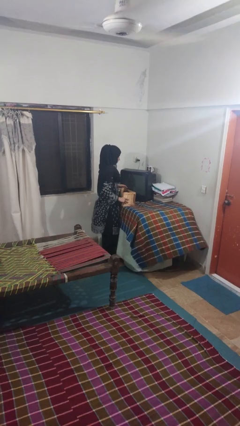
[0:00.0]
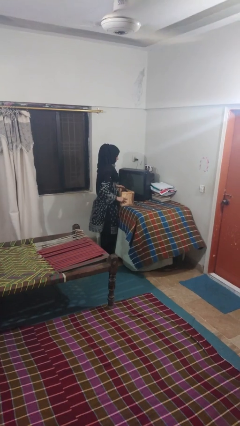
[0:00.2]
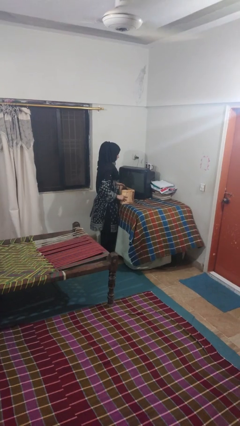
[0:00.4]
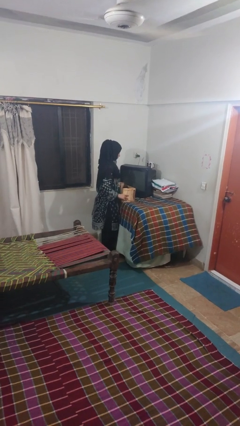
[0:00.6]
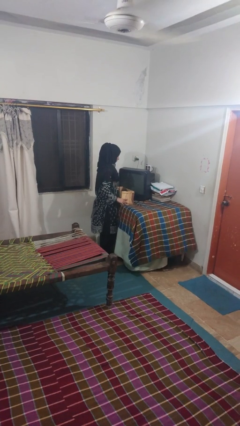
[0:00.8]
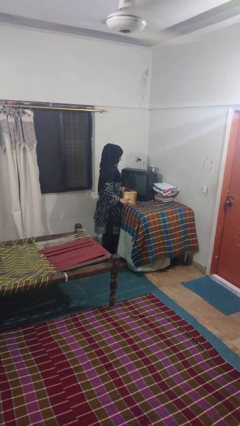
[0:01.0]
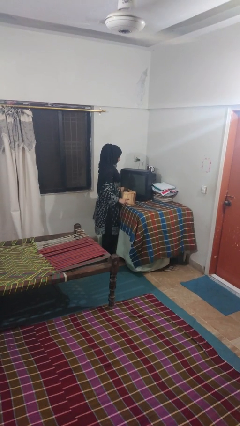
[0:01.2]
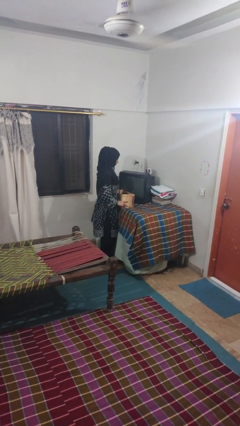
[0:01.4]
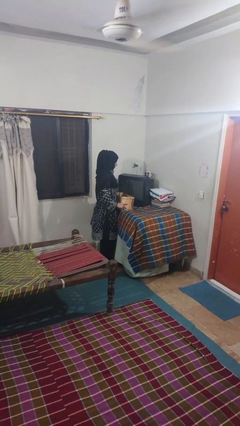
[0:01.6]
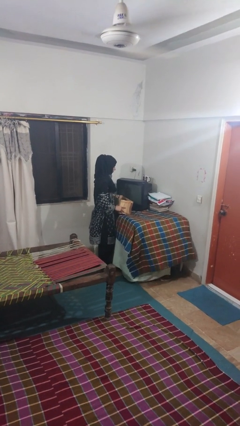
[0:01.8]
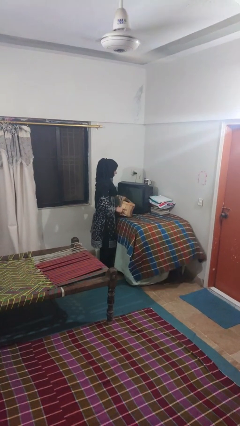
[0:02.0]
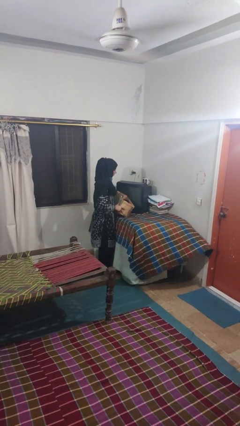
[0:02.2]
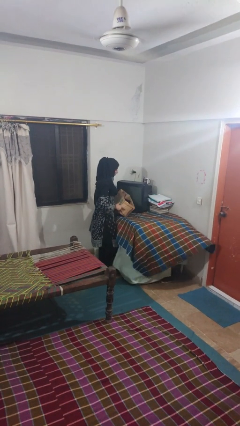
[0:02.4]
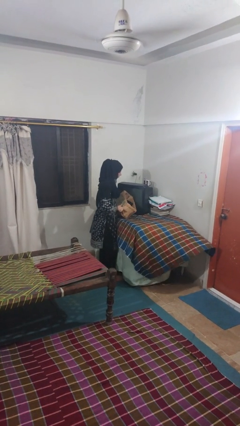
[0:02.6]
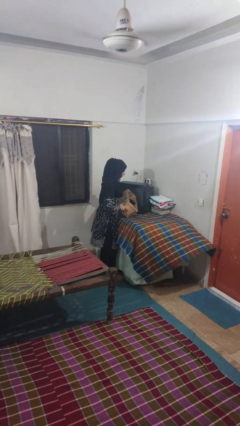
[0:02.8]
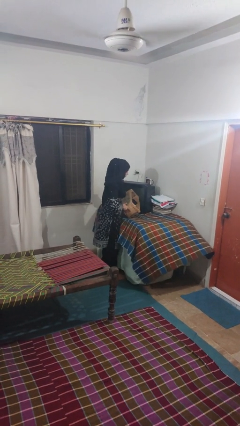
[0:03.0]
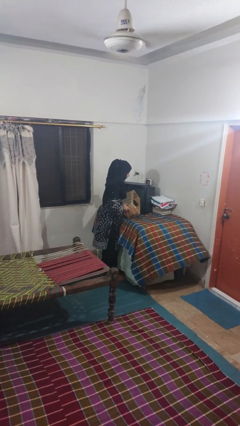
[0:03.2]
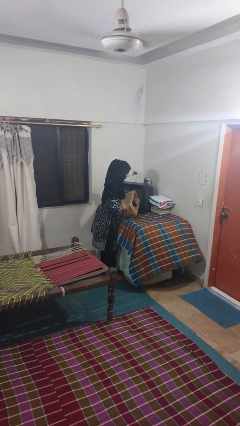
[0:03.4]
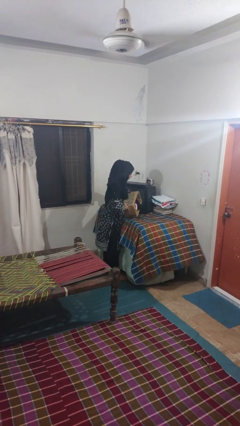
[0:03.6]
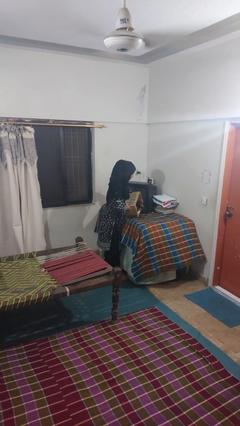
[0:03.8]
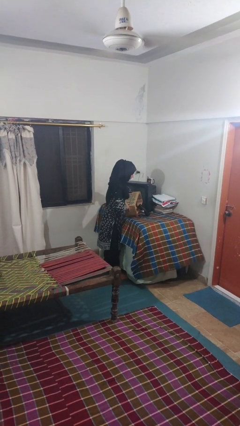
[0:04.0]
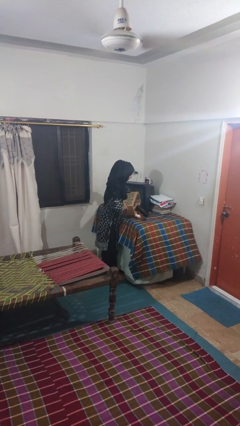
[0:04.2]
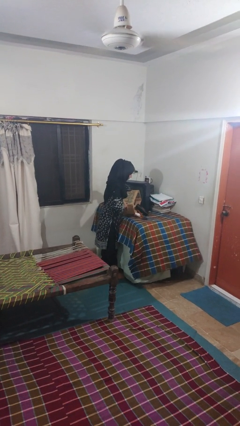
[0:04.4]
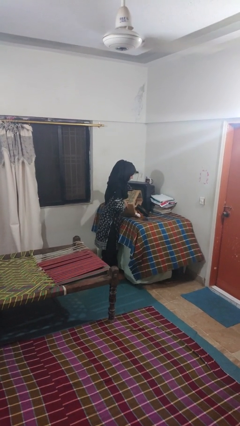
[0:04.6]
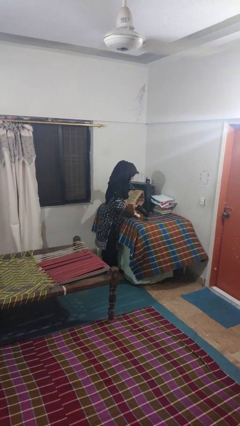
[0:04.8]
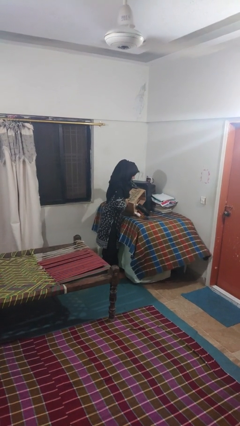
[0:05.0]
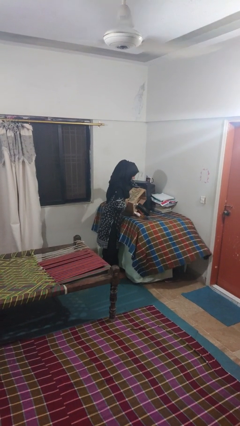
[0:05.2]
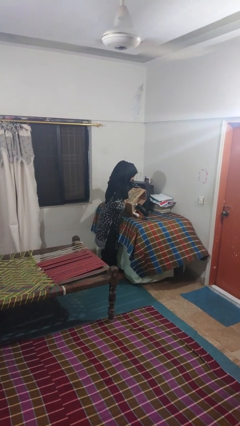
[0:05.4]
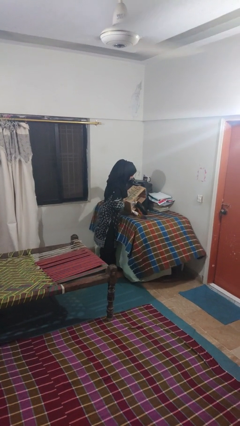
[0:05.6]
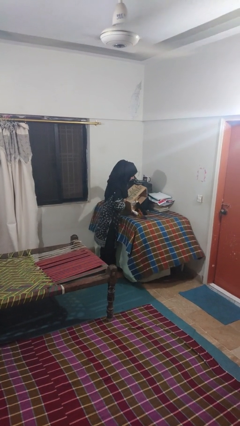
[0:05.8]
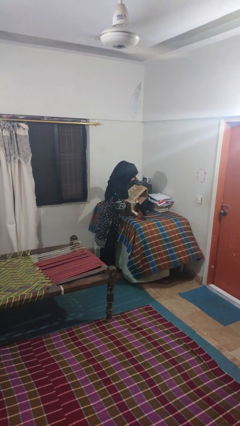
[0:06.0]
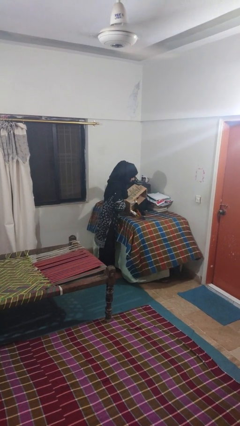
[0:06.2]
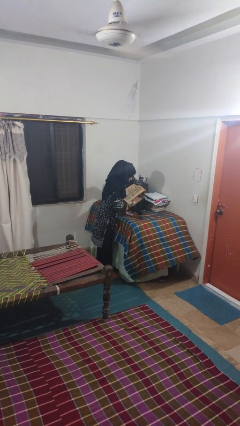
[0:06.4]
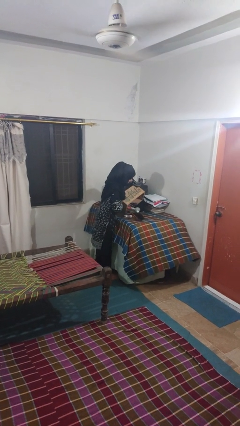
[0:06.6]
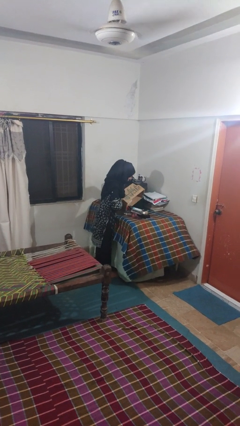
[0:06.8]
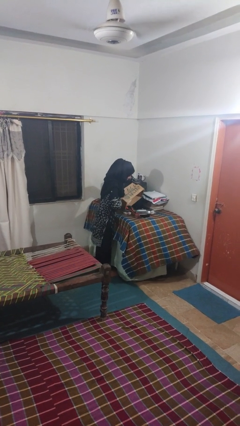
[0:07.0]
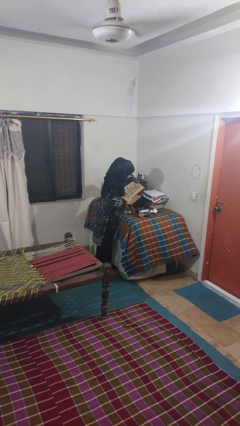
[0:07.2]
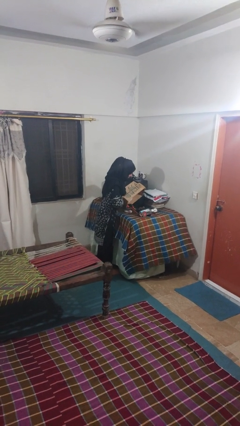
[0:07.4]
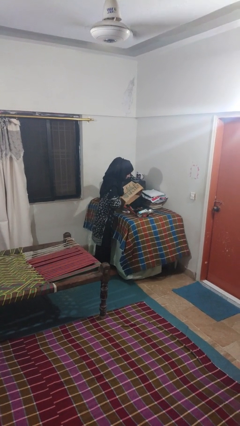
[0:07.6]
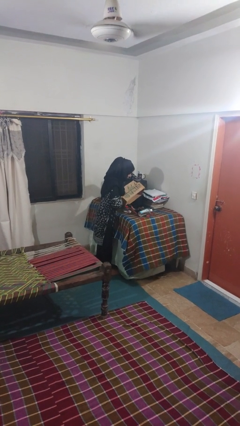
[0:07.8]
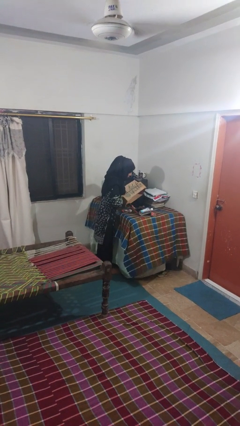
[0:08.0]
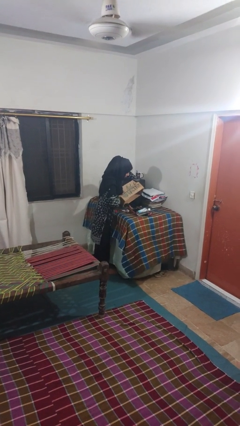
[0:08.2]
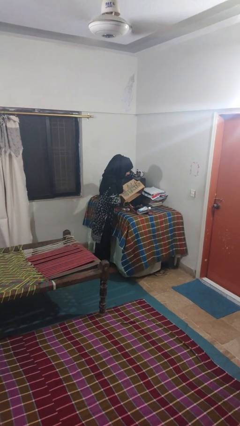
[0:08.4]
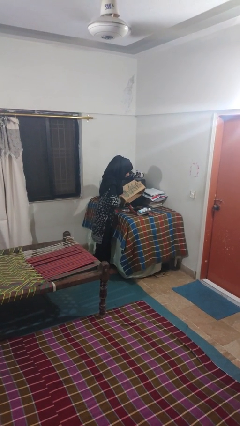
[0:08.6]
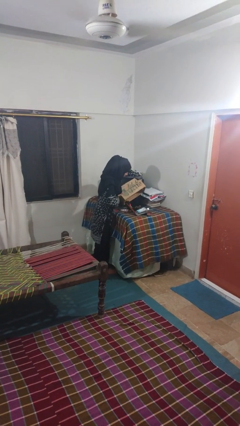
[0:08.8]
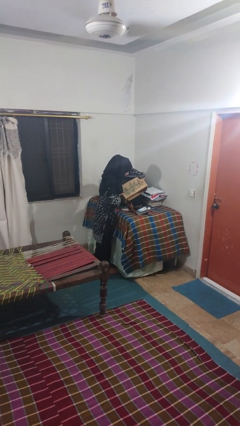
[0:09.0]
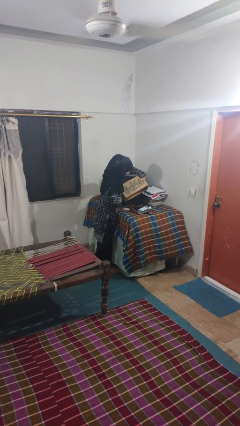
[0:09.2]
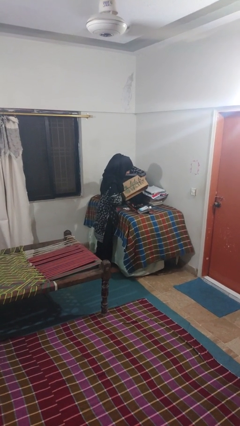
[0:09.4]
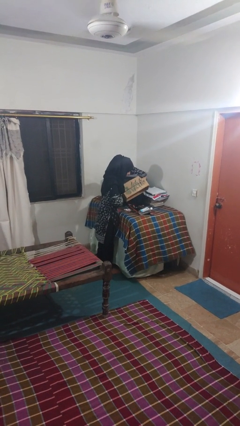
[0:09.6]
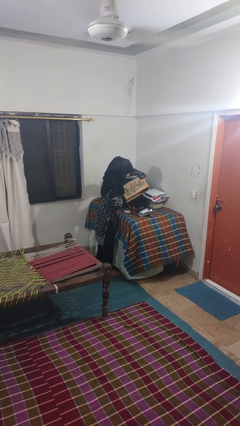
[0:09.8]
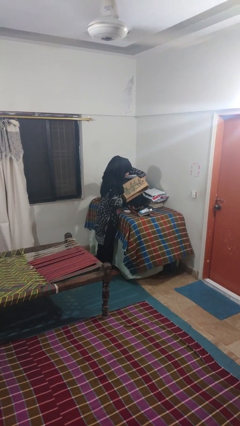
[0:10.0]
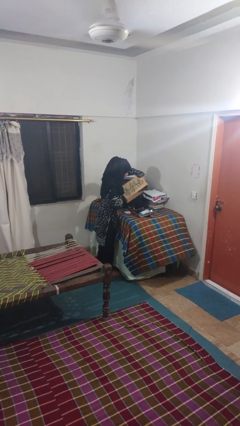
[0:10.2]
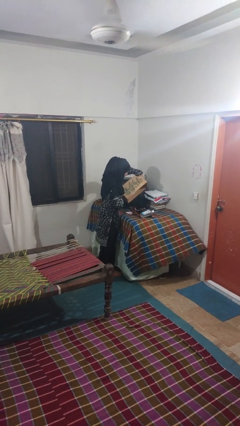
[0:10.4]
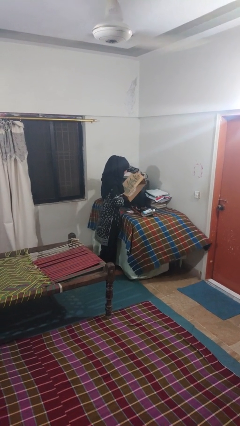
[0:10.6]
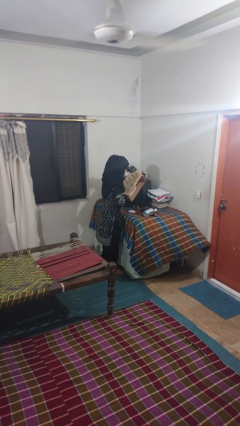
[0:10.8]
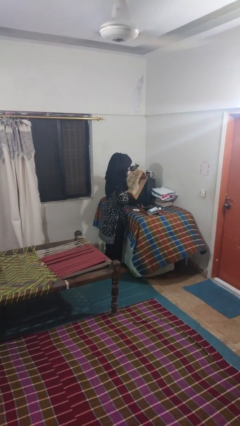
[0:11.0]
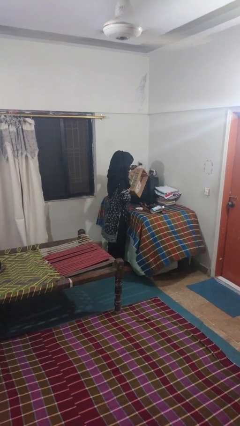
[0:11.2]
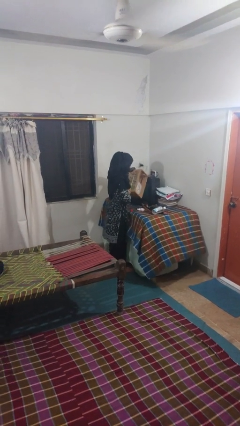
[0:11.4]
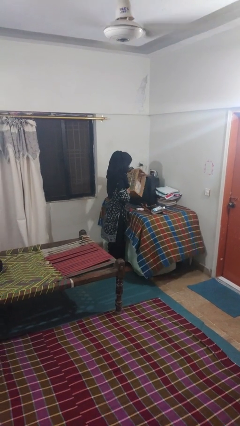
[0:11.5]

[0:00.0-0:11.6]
person unloads box onto table

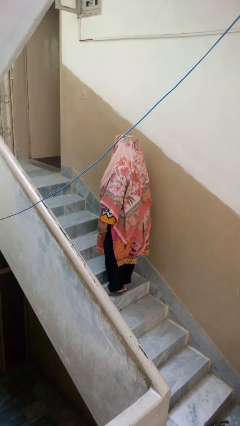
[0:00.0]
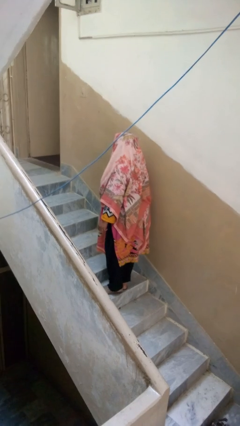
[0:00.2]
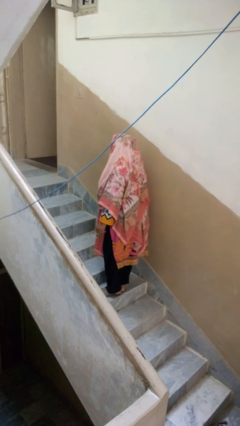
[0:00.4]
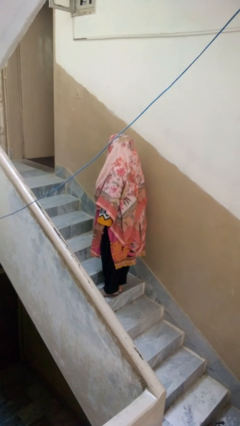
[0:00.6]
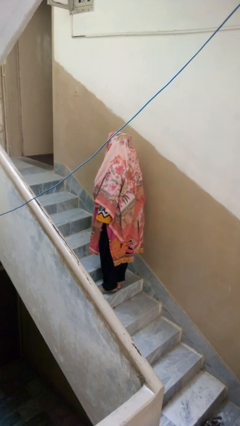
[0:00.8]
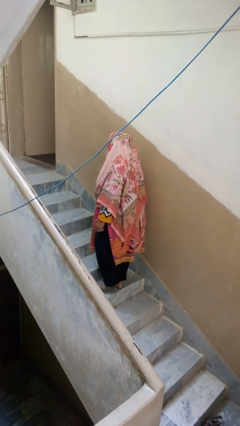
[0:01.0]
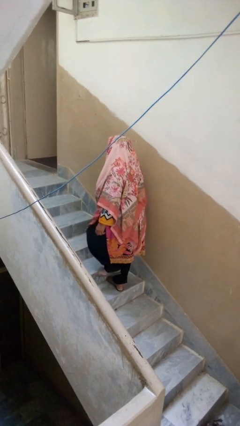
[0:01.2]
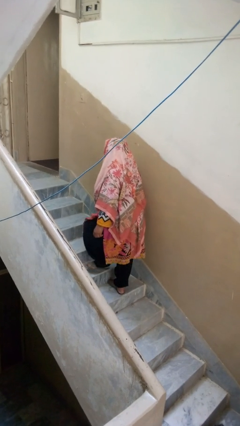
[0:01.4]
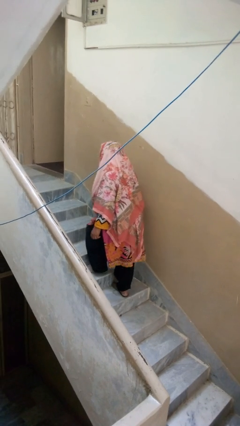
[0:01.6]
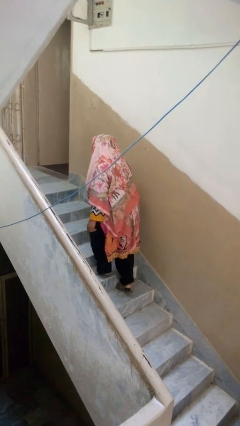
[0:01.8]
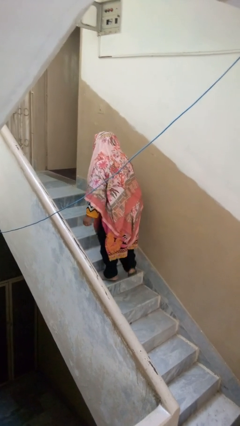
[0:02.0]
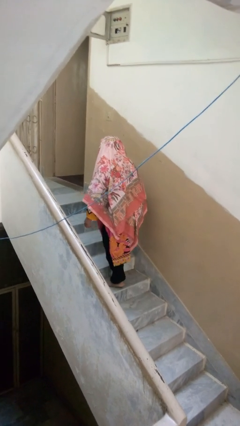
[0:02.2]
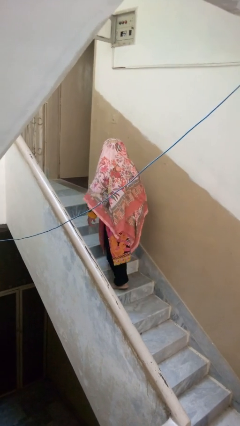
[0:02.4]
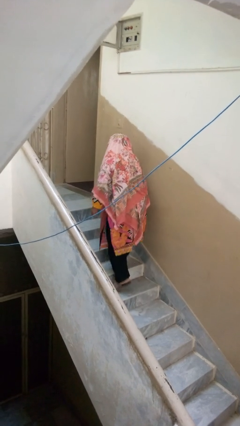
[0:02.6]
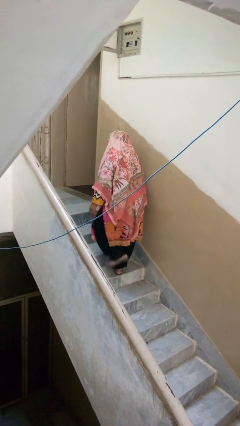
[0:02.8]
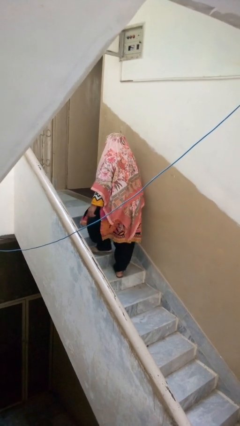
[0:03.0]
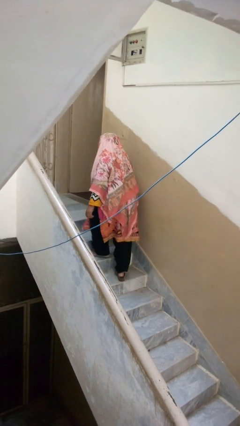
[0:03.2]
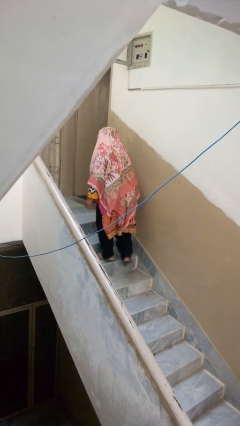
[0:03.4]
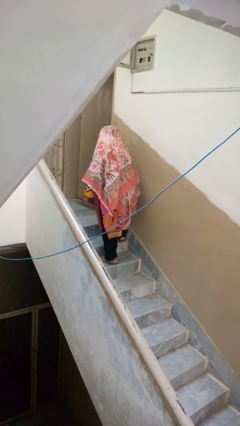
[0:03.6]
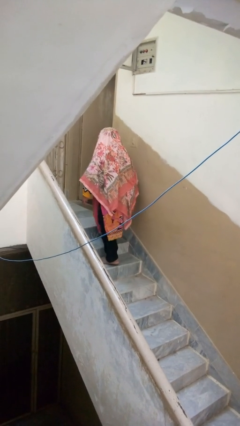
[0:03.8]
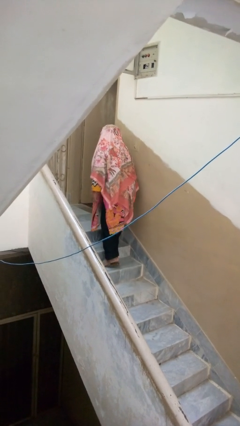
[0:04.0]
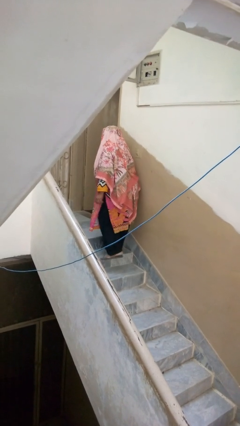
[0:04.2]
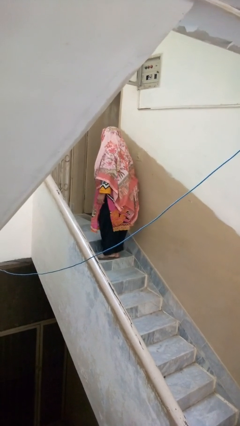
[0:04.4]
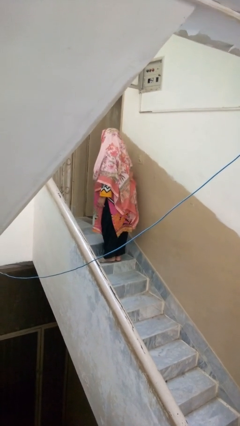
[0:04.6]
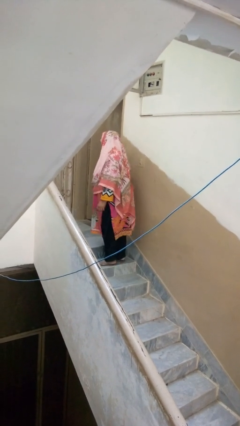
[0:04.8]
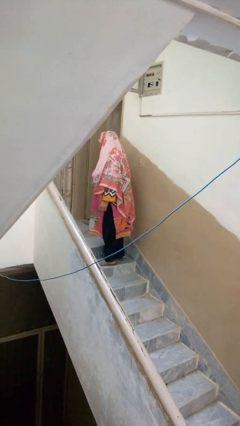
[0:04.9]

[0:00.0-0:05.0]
person climbs up stairs

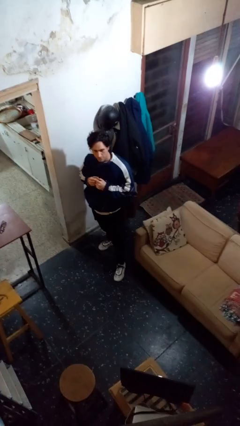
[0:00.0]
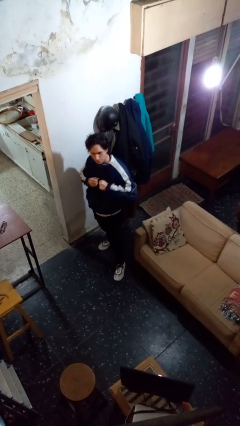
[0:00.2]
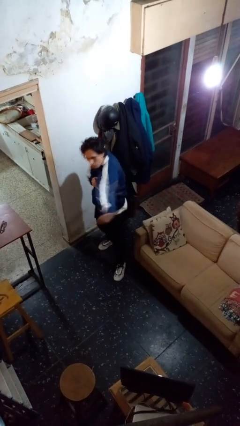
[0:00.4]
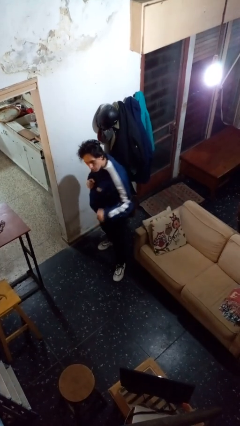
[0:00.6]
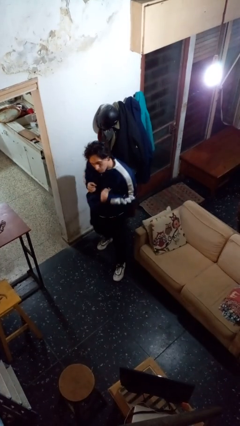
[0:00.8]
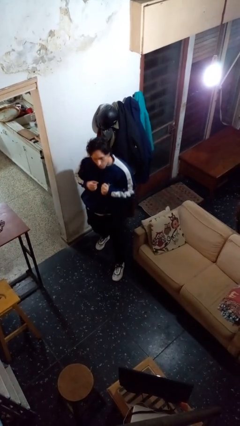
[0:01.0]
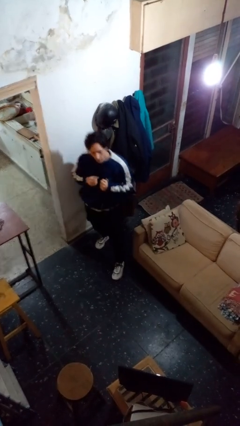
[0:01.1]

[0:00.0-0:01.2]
person karate chop
